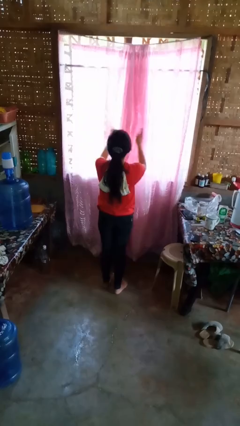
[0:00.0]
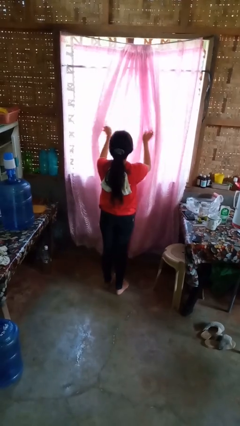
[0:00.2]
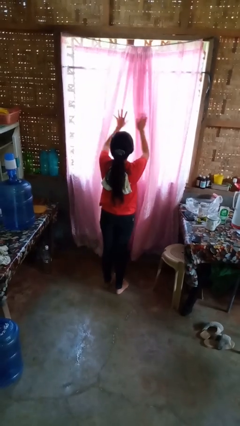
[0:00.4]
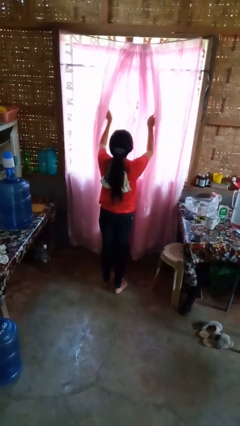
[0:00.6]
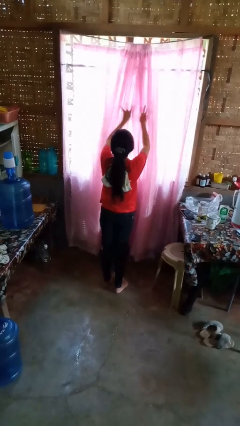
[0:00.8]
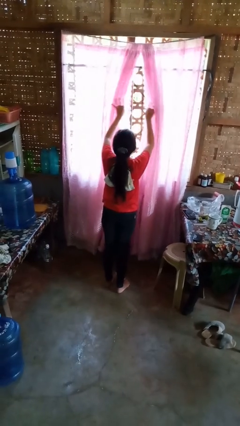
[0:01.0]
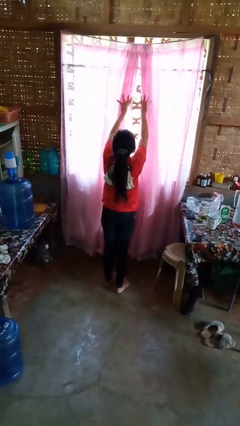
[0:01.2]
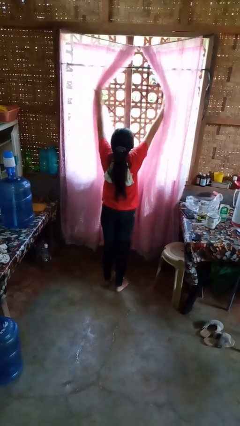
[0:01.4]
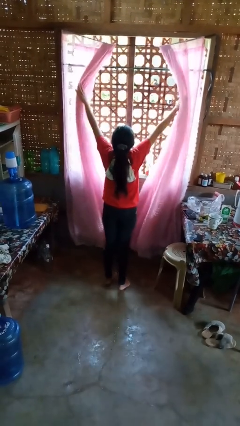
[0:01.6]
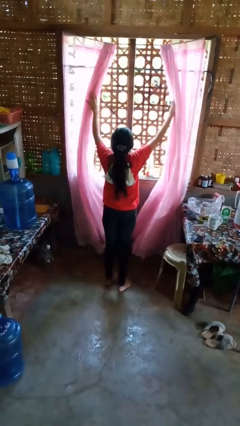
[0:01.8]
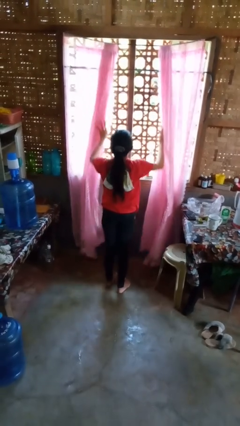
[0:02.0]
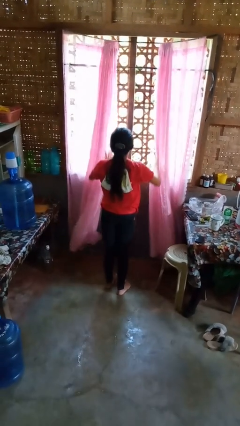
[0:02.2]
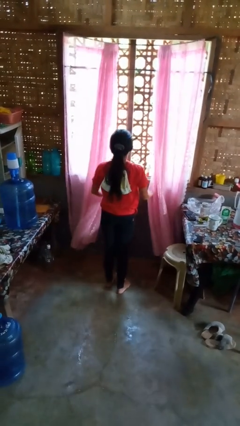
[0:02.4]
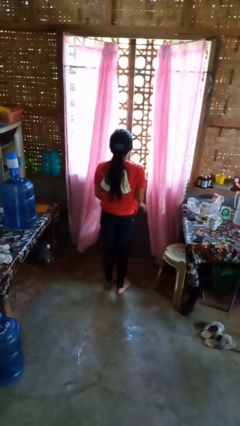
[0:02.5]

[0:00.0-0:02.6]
person opens curtains

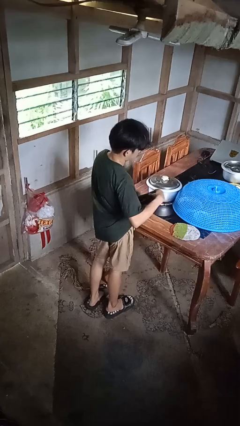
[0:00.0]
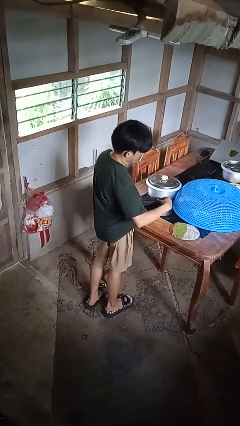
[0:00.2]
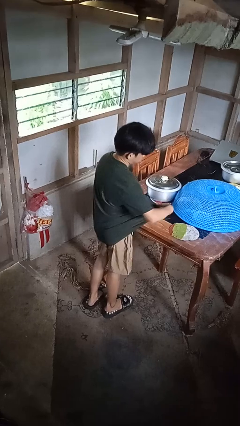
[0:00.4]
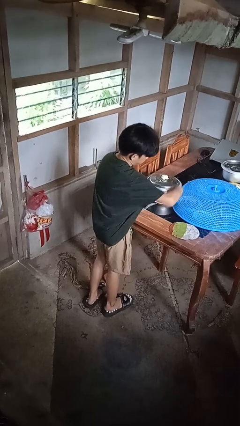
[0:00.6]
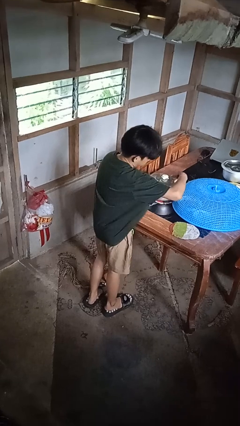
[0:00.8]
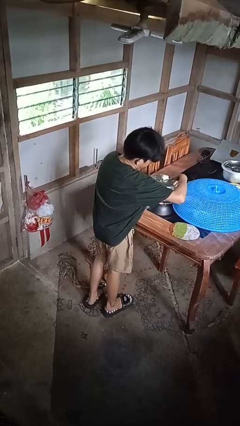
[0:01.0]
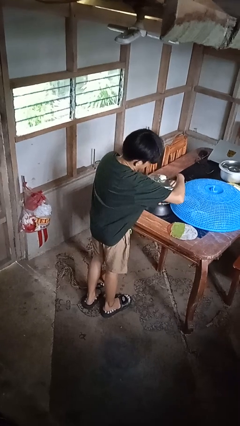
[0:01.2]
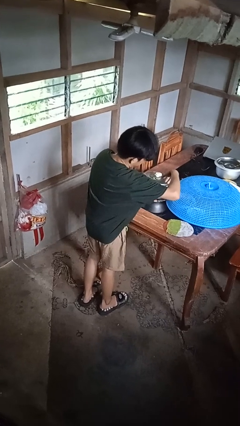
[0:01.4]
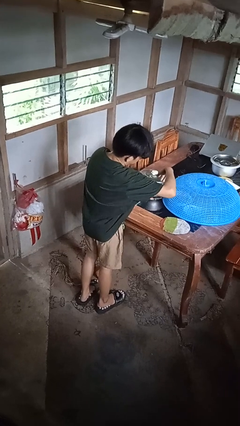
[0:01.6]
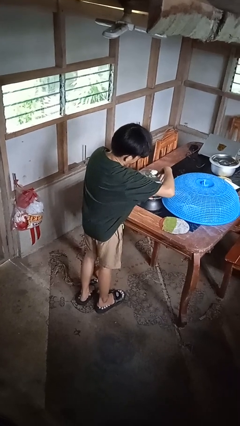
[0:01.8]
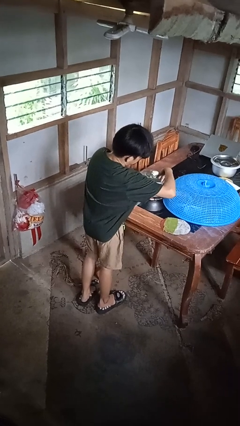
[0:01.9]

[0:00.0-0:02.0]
person applies deodorant

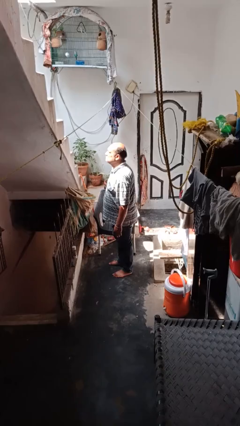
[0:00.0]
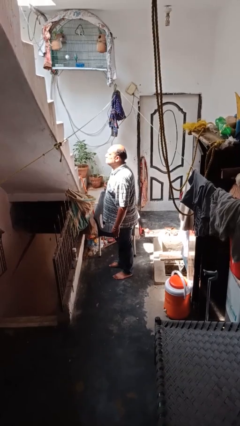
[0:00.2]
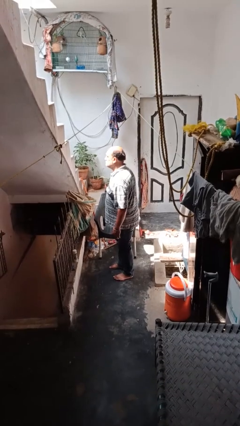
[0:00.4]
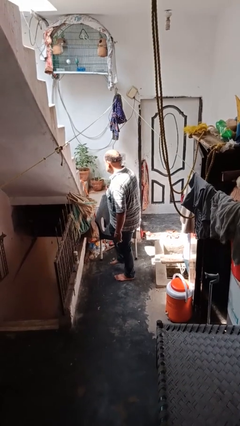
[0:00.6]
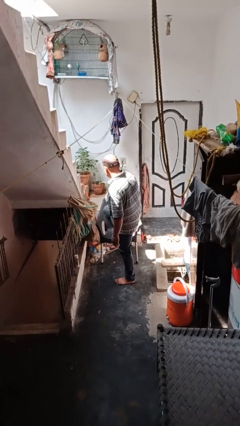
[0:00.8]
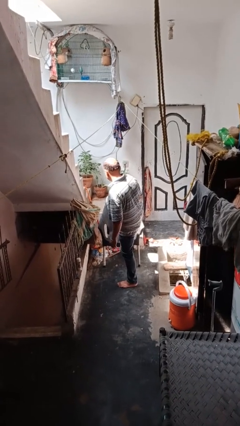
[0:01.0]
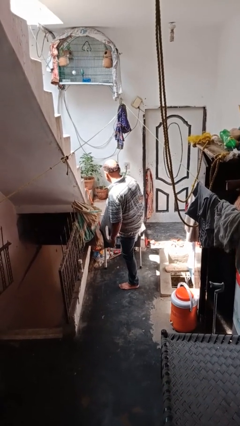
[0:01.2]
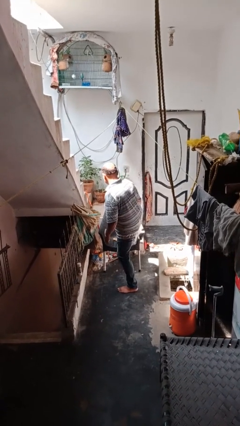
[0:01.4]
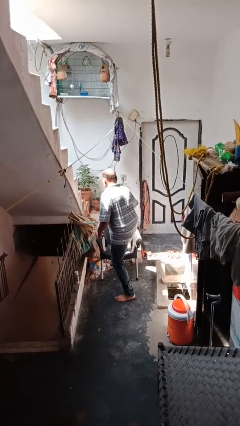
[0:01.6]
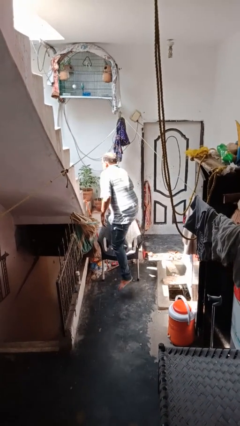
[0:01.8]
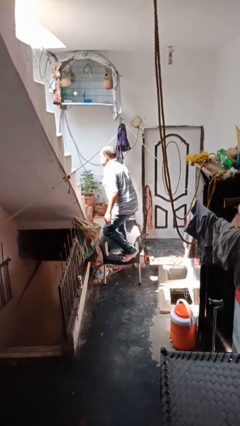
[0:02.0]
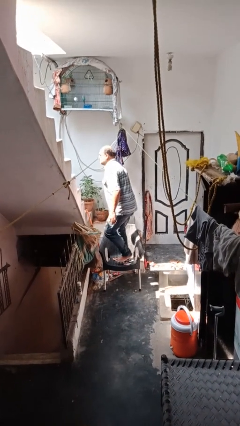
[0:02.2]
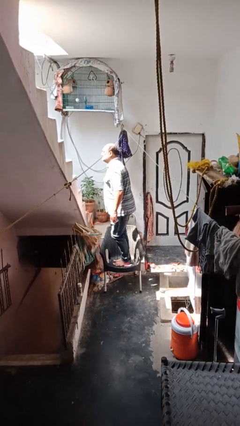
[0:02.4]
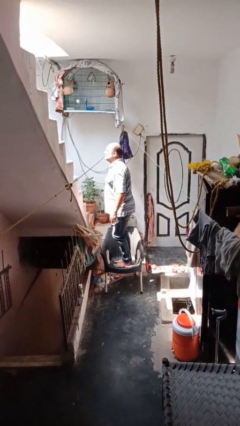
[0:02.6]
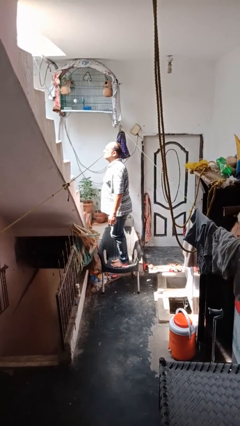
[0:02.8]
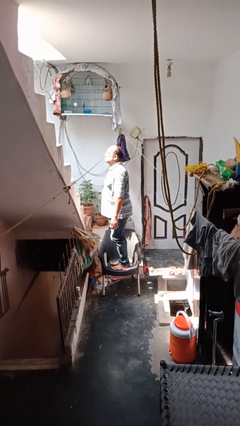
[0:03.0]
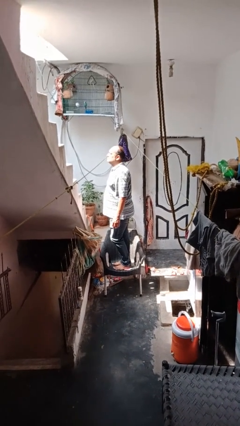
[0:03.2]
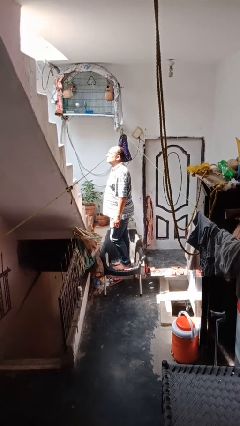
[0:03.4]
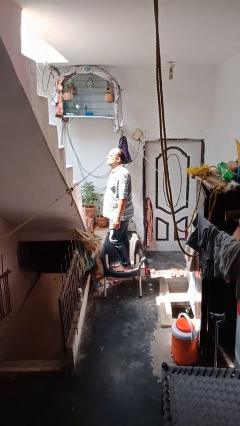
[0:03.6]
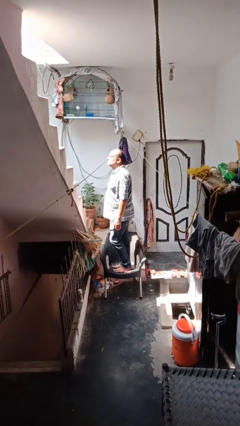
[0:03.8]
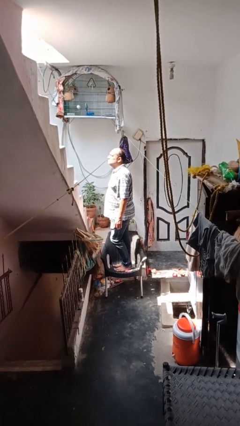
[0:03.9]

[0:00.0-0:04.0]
person climbs on chair

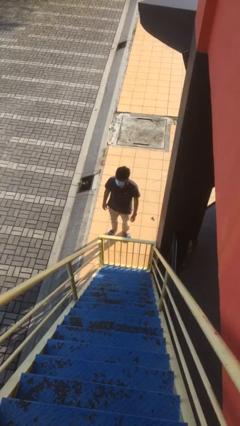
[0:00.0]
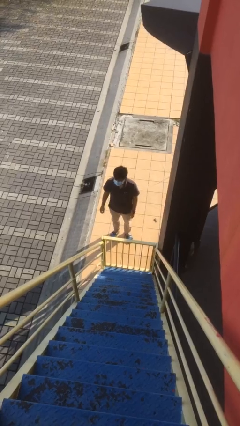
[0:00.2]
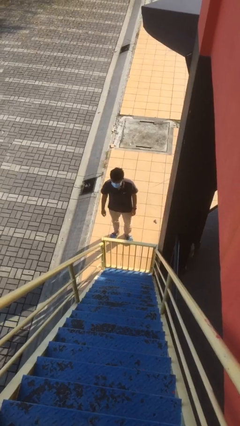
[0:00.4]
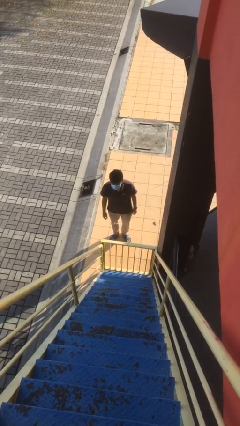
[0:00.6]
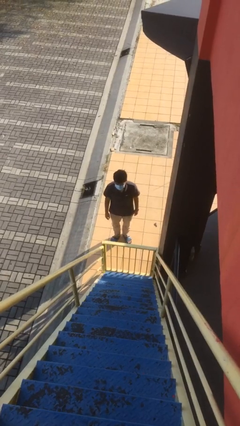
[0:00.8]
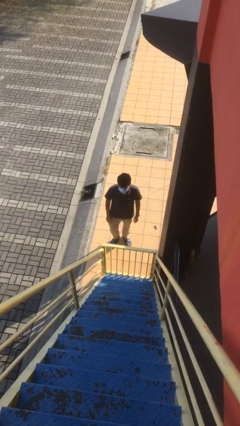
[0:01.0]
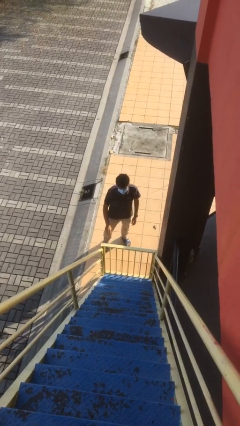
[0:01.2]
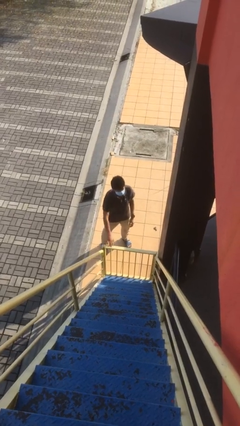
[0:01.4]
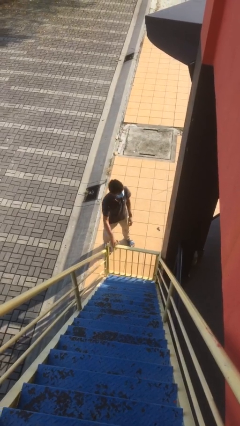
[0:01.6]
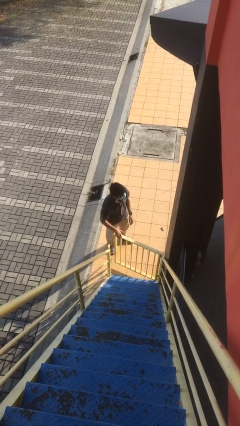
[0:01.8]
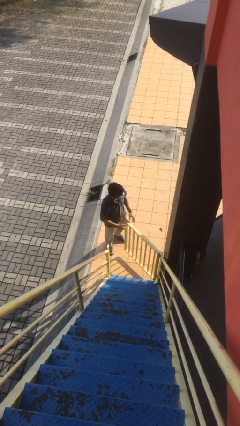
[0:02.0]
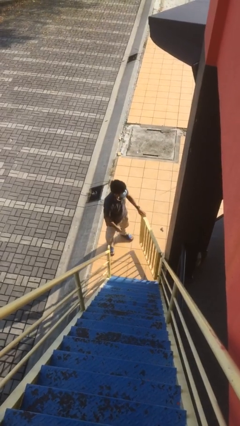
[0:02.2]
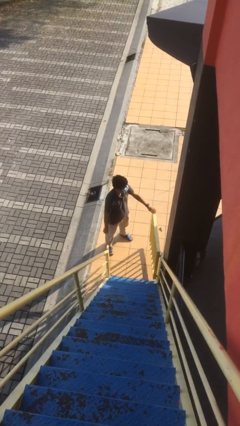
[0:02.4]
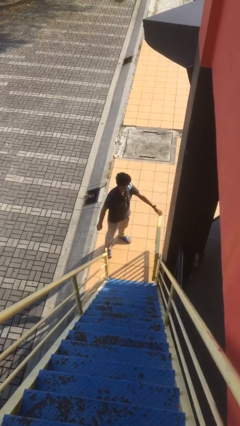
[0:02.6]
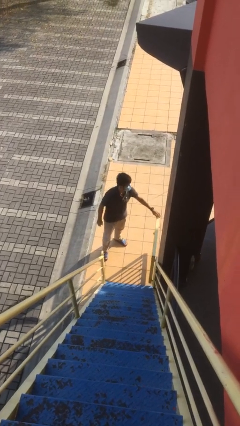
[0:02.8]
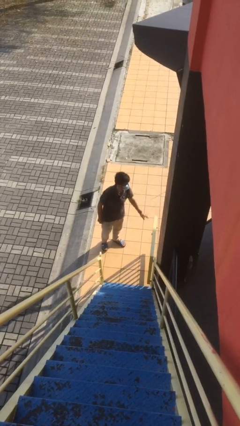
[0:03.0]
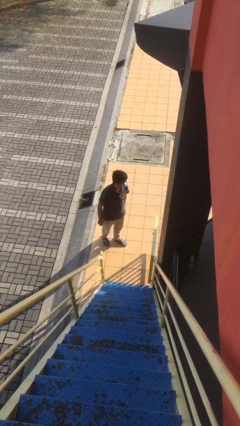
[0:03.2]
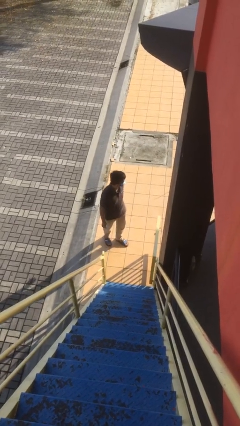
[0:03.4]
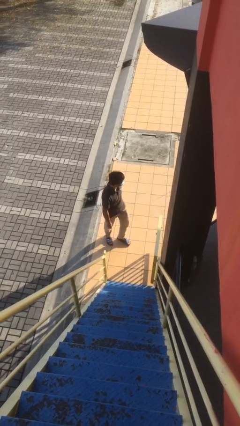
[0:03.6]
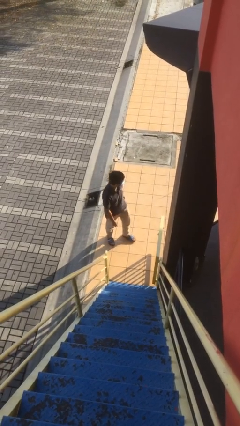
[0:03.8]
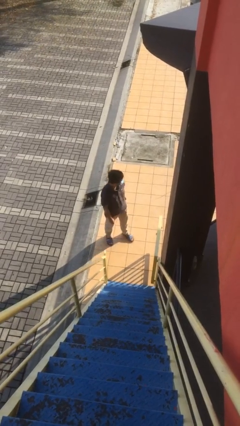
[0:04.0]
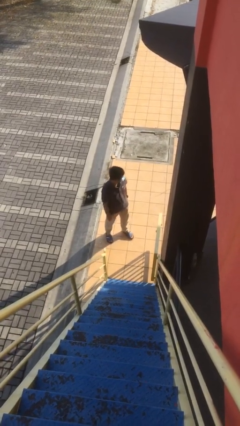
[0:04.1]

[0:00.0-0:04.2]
person opens facility door

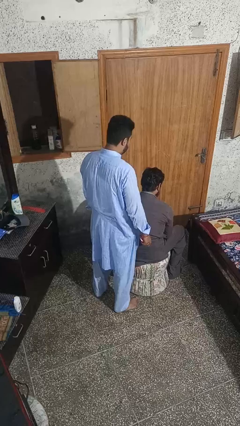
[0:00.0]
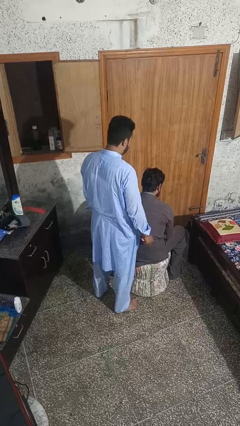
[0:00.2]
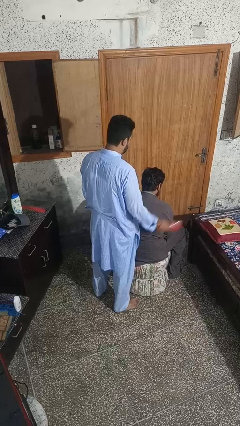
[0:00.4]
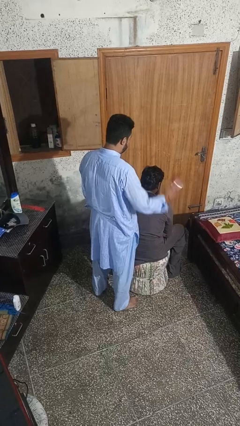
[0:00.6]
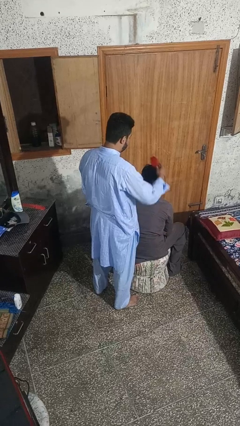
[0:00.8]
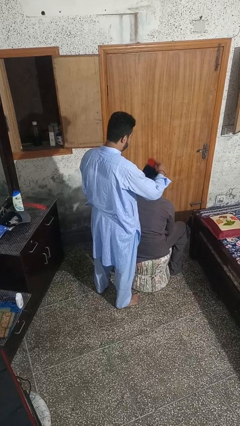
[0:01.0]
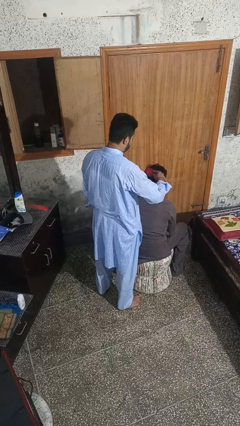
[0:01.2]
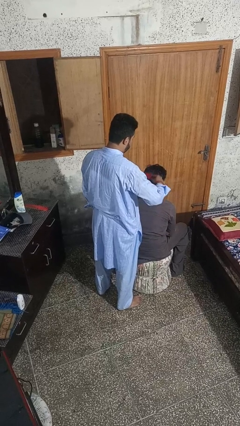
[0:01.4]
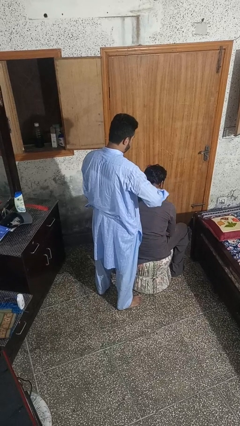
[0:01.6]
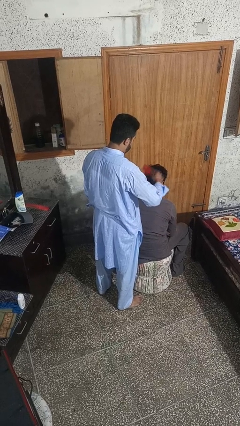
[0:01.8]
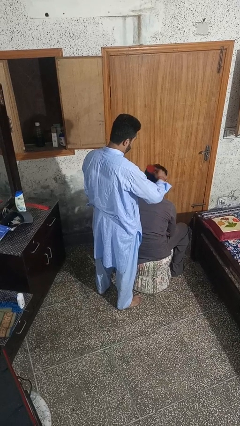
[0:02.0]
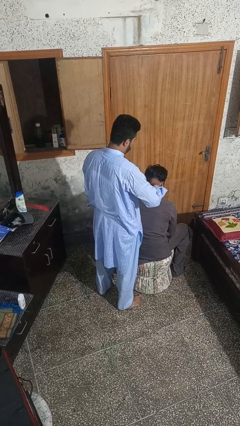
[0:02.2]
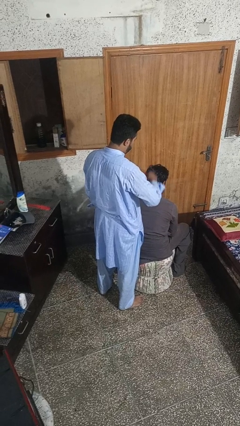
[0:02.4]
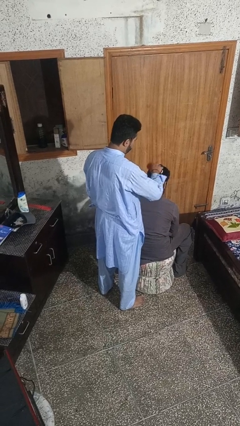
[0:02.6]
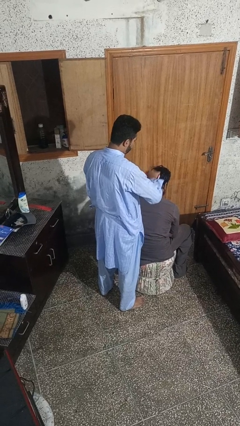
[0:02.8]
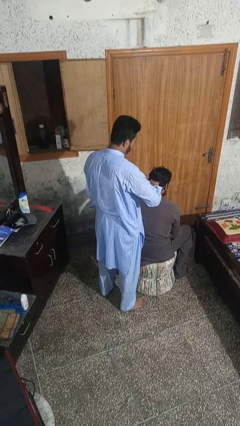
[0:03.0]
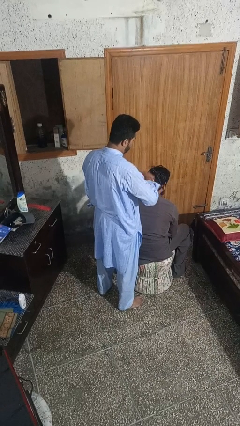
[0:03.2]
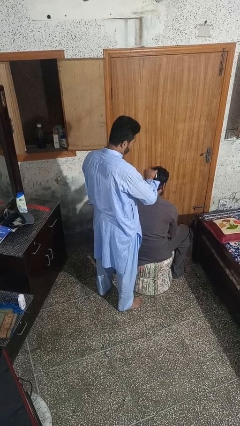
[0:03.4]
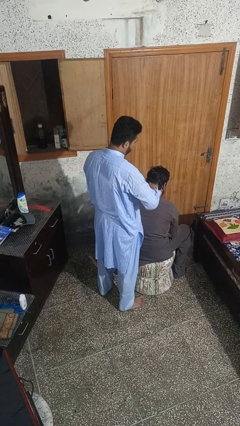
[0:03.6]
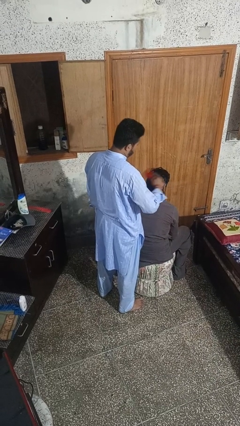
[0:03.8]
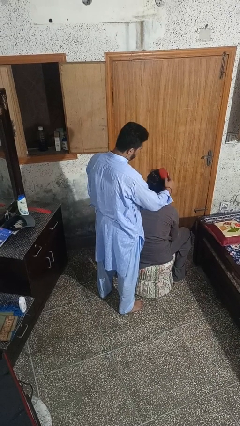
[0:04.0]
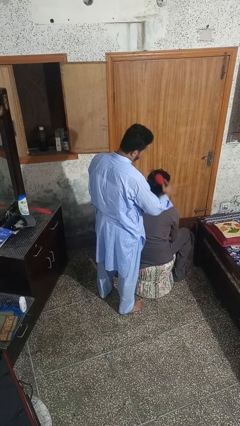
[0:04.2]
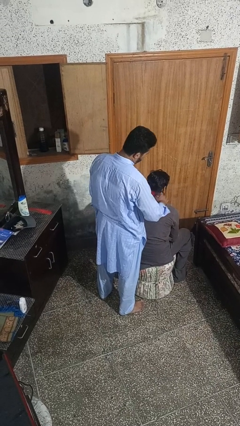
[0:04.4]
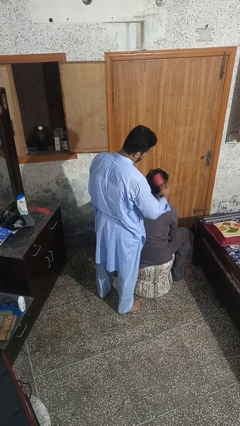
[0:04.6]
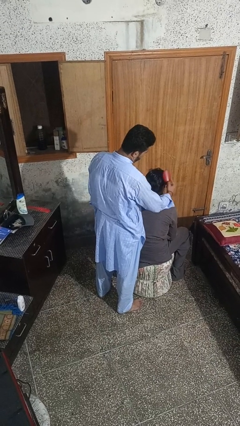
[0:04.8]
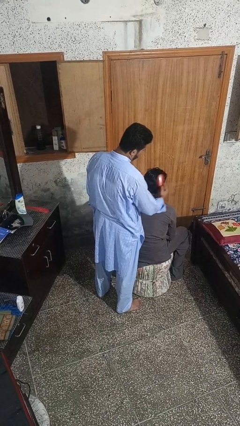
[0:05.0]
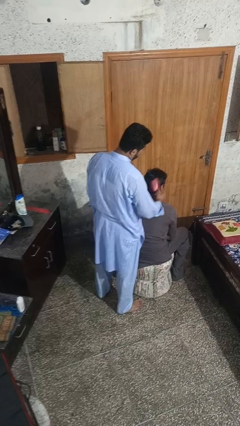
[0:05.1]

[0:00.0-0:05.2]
person brushes hair of person
